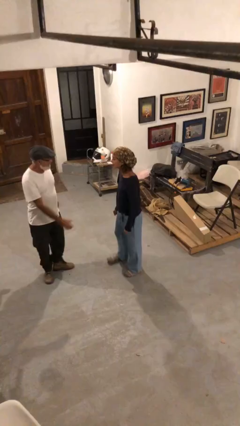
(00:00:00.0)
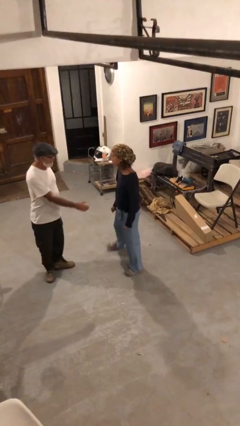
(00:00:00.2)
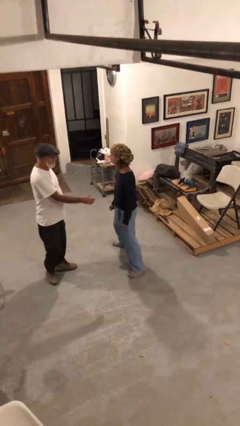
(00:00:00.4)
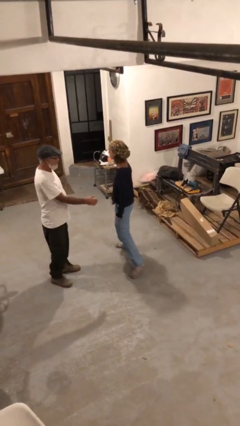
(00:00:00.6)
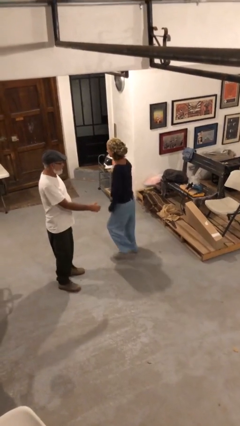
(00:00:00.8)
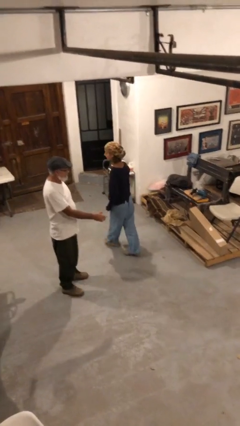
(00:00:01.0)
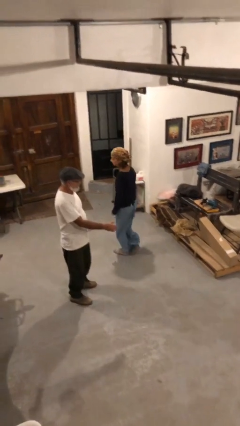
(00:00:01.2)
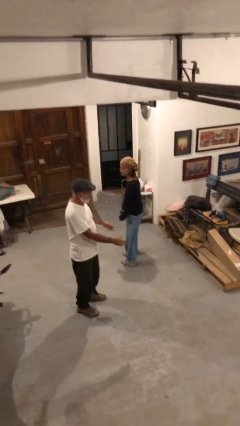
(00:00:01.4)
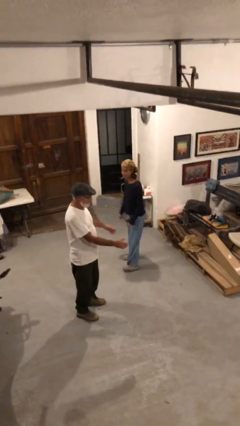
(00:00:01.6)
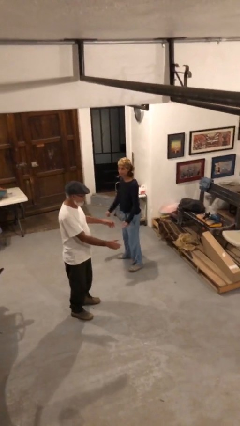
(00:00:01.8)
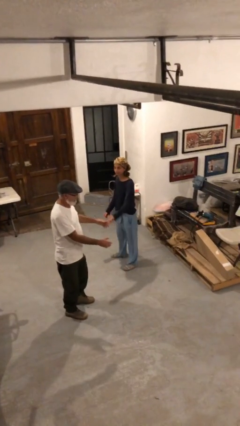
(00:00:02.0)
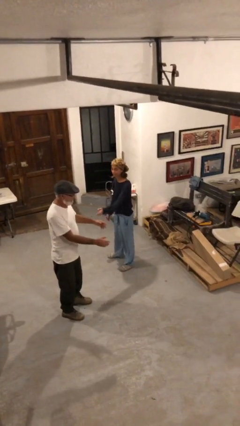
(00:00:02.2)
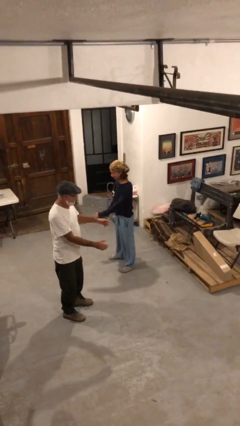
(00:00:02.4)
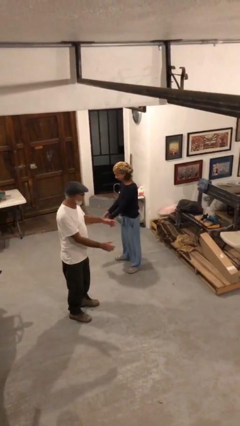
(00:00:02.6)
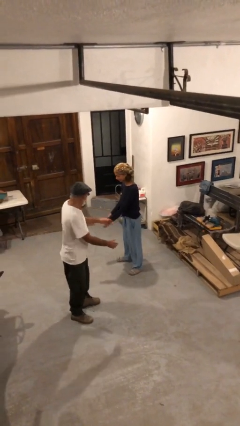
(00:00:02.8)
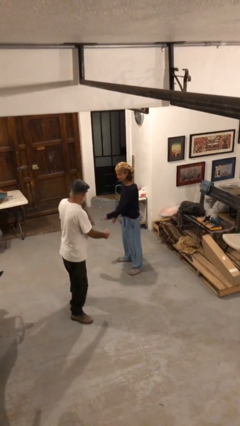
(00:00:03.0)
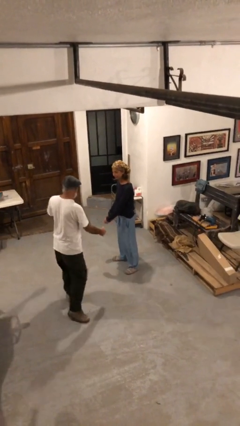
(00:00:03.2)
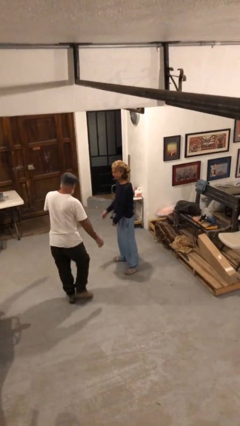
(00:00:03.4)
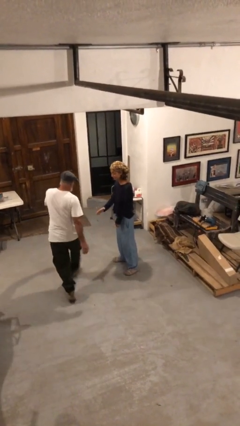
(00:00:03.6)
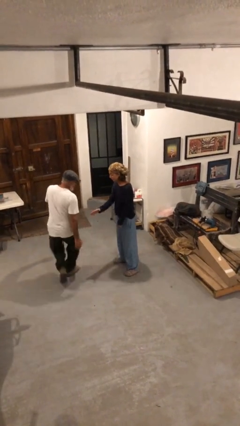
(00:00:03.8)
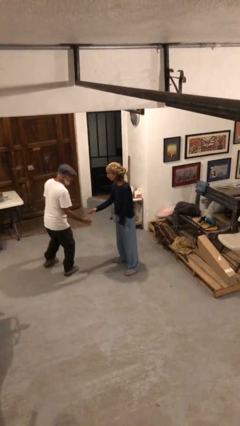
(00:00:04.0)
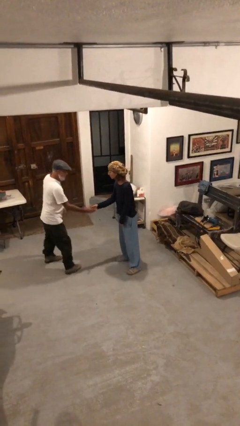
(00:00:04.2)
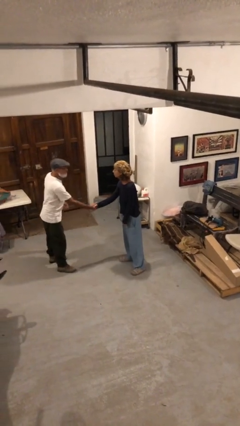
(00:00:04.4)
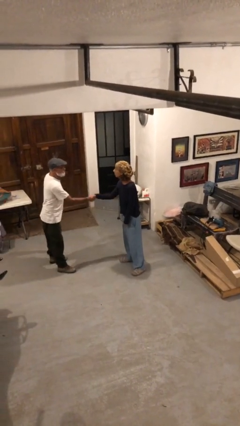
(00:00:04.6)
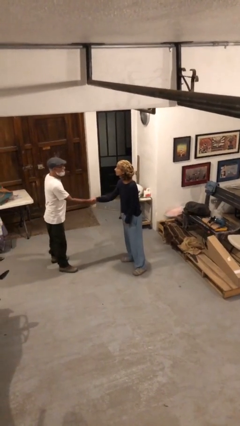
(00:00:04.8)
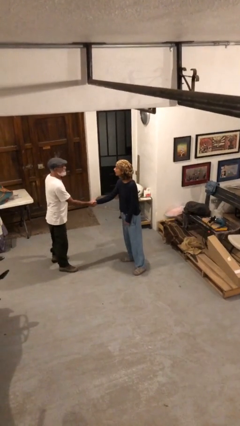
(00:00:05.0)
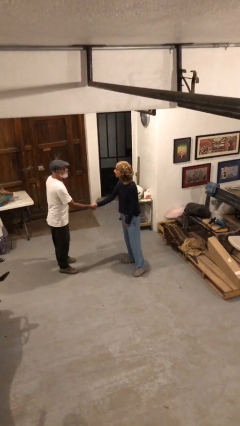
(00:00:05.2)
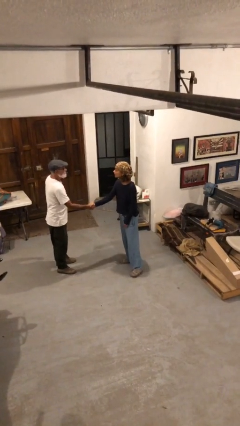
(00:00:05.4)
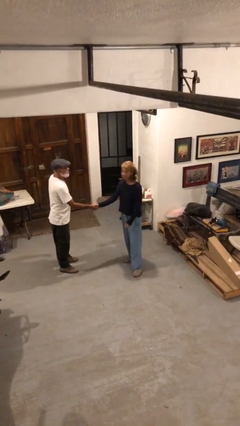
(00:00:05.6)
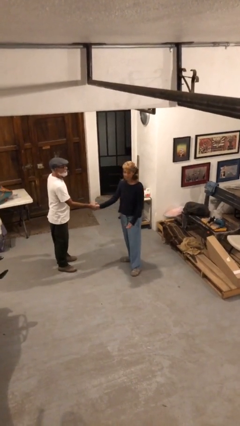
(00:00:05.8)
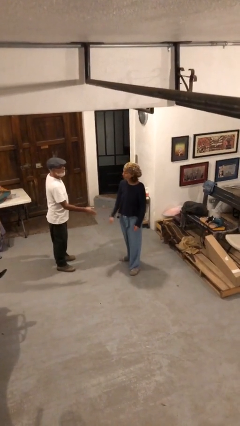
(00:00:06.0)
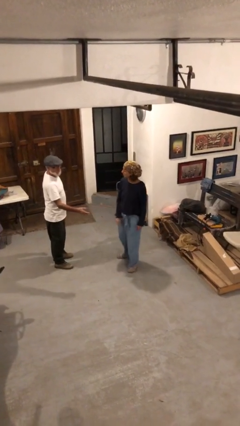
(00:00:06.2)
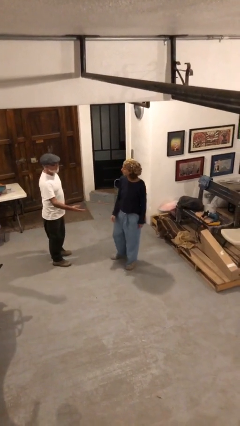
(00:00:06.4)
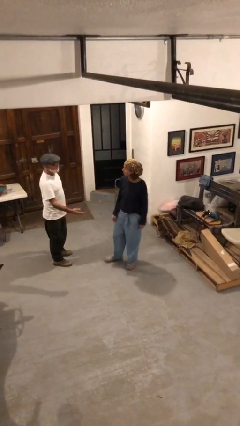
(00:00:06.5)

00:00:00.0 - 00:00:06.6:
person shakes hand

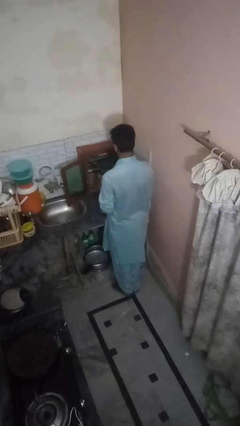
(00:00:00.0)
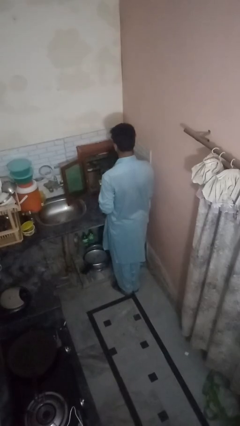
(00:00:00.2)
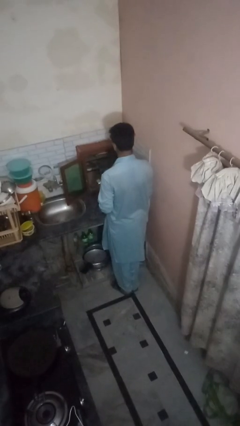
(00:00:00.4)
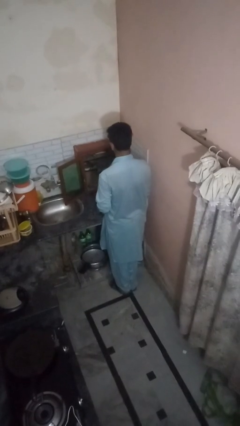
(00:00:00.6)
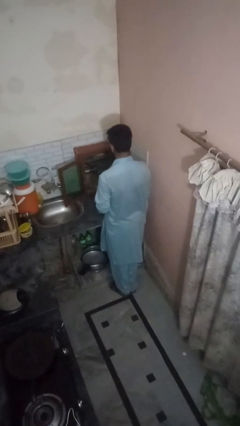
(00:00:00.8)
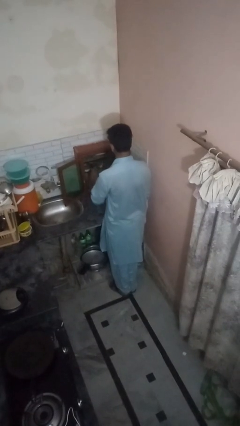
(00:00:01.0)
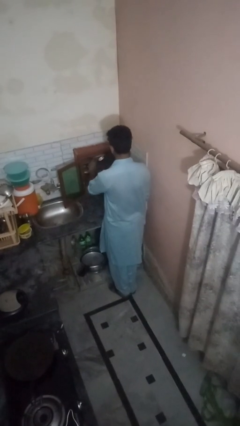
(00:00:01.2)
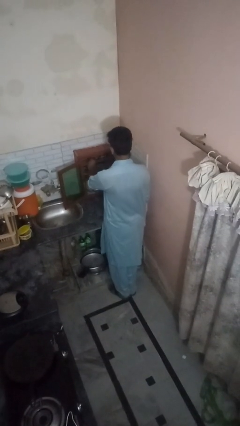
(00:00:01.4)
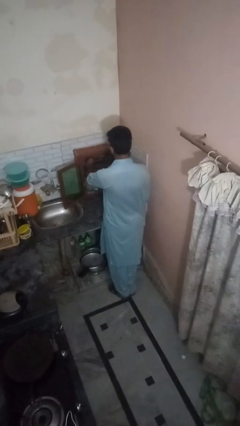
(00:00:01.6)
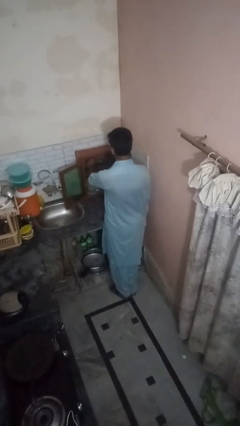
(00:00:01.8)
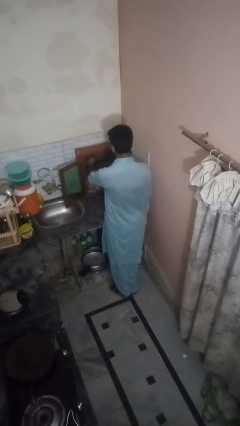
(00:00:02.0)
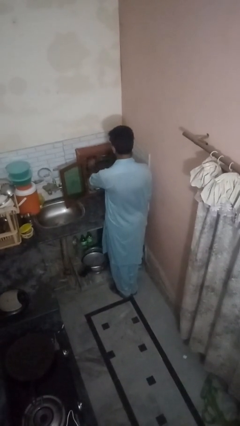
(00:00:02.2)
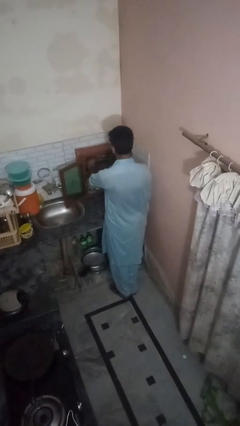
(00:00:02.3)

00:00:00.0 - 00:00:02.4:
person puts object into kitchen drawer

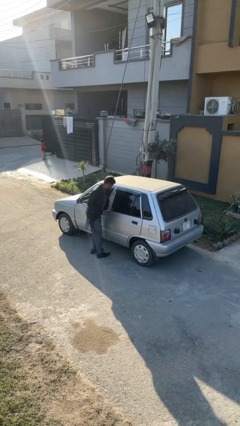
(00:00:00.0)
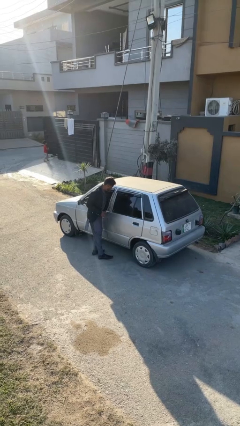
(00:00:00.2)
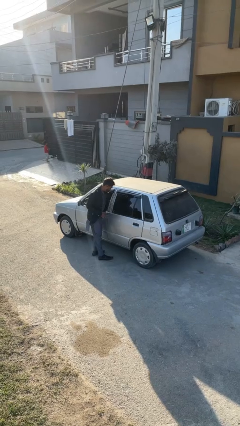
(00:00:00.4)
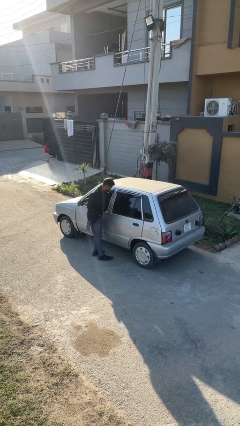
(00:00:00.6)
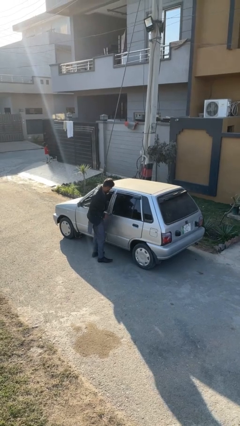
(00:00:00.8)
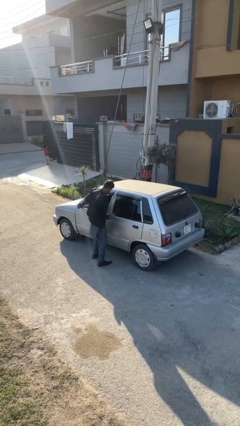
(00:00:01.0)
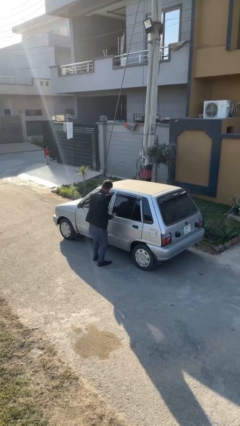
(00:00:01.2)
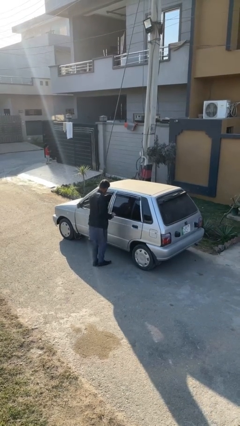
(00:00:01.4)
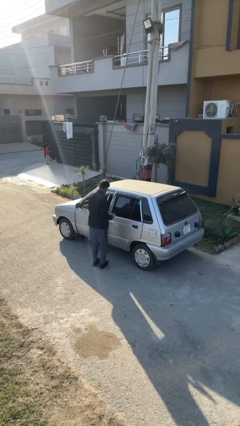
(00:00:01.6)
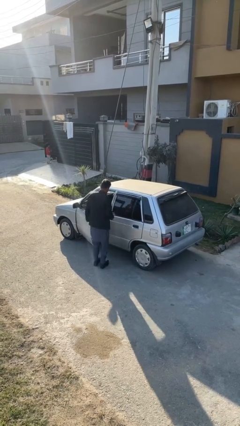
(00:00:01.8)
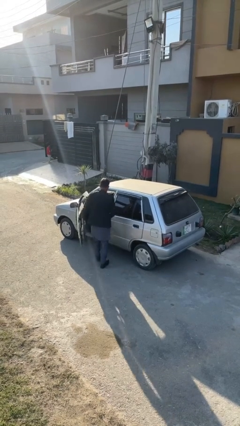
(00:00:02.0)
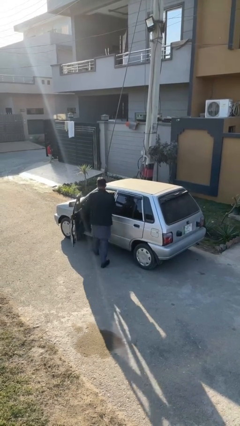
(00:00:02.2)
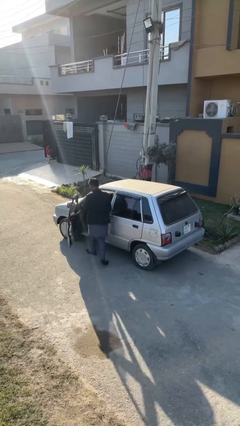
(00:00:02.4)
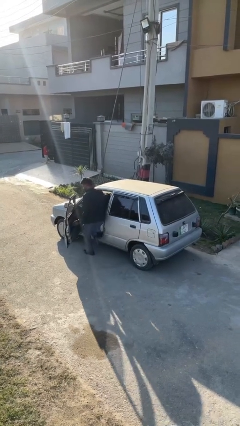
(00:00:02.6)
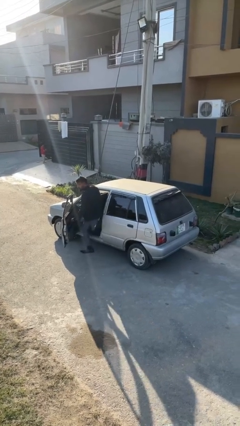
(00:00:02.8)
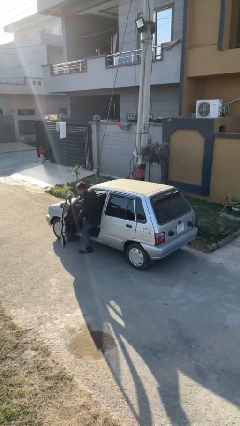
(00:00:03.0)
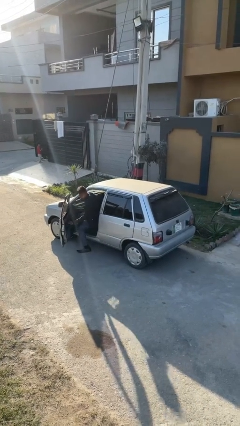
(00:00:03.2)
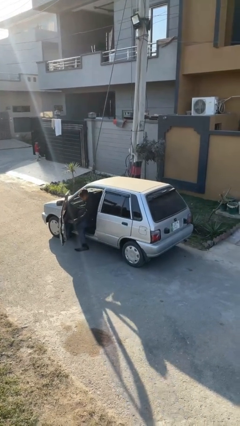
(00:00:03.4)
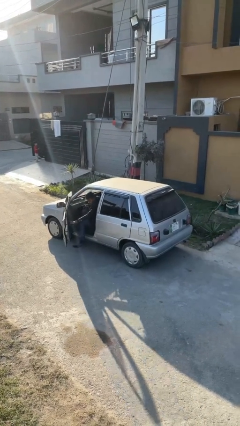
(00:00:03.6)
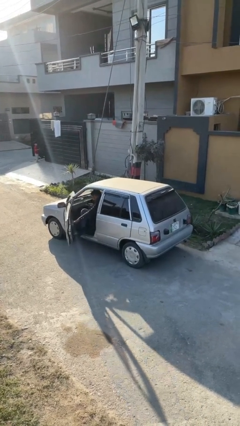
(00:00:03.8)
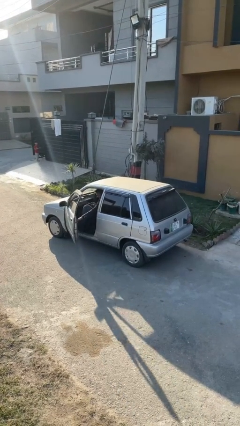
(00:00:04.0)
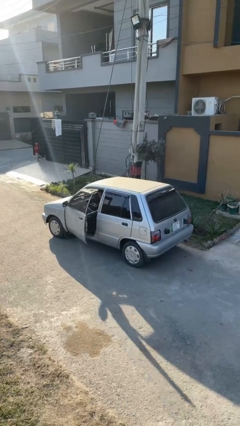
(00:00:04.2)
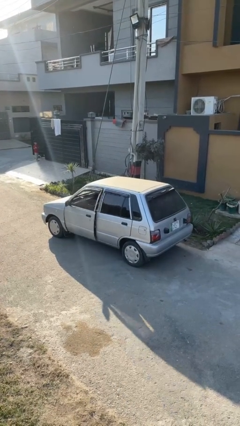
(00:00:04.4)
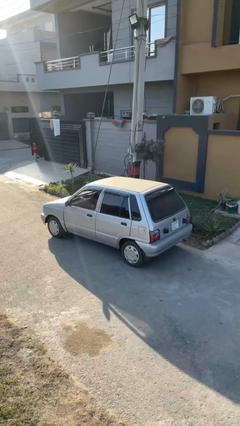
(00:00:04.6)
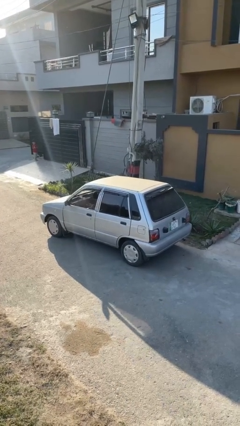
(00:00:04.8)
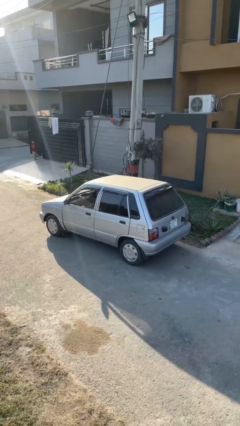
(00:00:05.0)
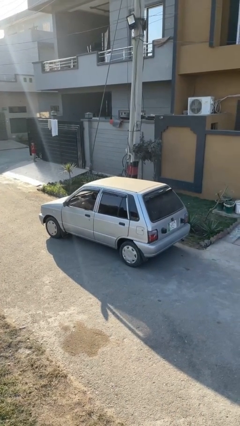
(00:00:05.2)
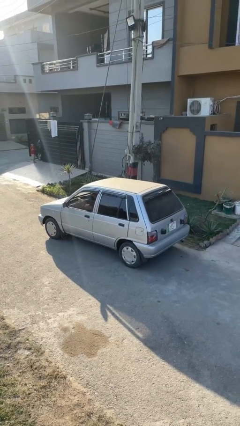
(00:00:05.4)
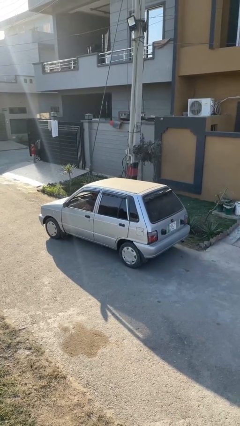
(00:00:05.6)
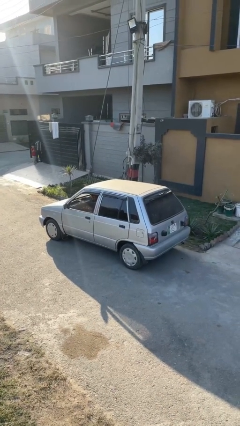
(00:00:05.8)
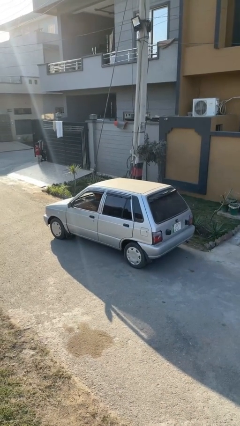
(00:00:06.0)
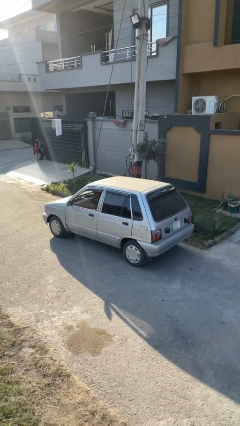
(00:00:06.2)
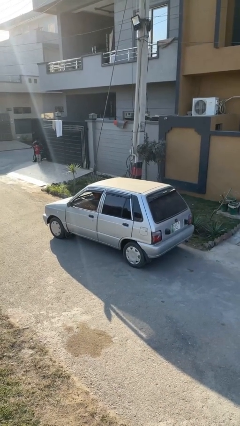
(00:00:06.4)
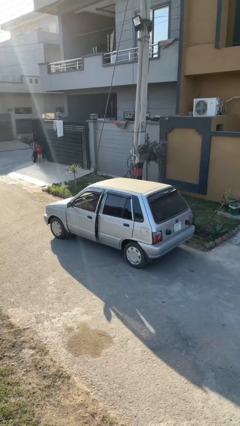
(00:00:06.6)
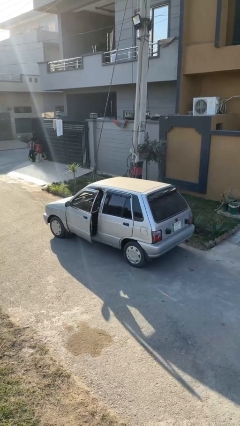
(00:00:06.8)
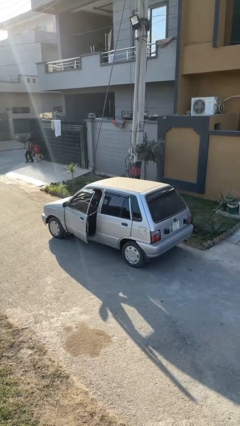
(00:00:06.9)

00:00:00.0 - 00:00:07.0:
car picks up person

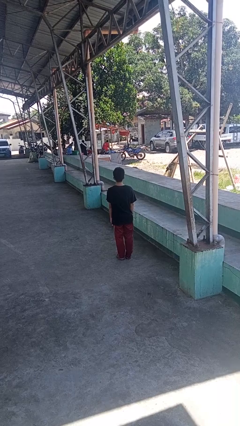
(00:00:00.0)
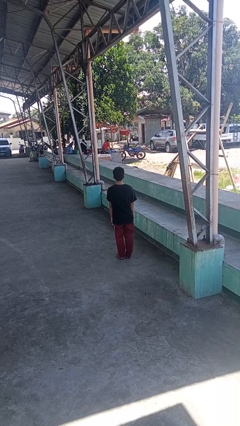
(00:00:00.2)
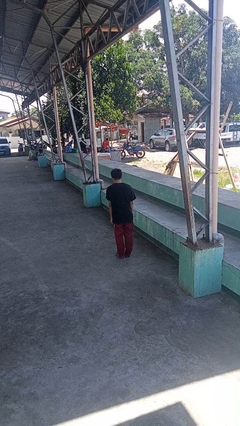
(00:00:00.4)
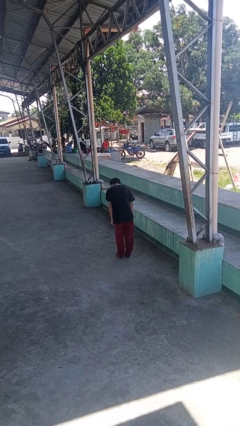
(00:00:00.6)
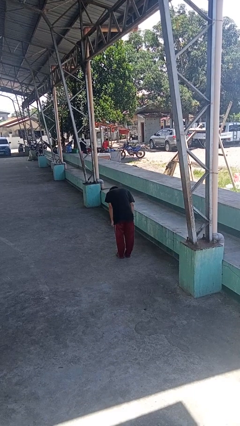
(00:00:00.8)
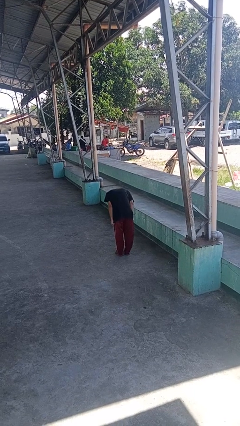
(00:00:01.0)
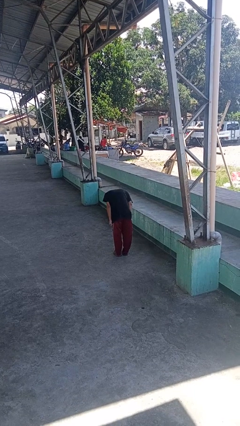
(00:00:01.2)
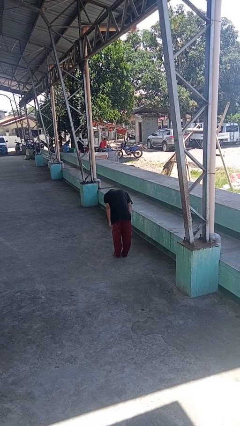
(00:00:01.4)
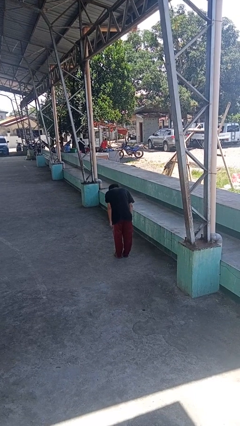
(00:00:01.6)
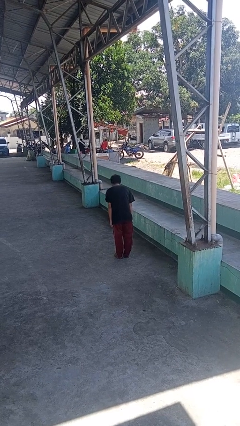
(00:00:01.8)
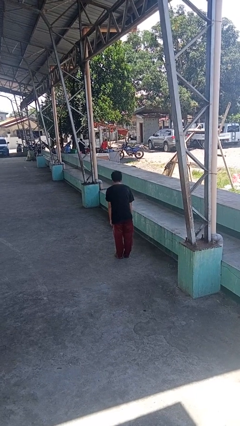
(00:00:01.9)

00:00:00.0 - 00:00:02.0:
person bows
